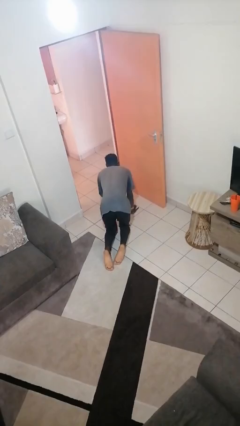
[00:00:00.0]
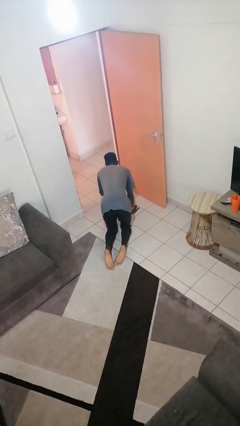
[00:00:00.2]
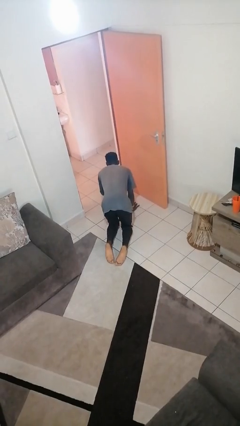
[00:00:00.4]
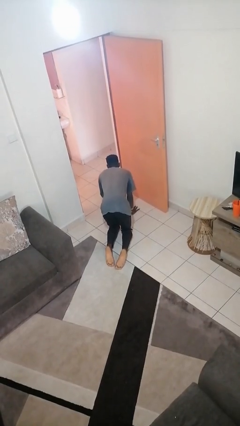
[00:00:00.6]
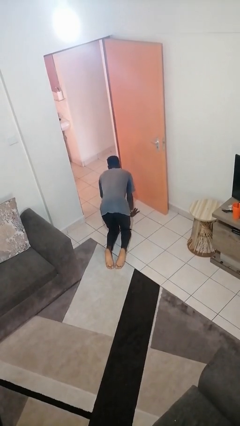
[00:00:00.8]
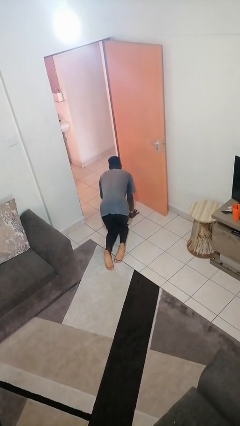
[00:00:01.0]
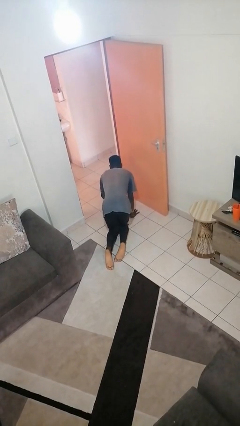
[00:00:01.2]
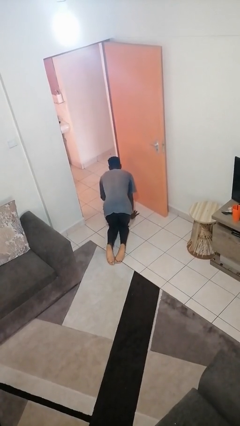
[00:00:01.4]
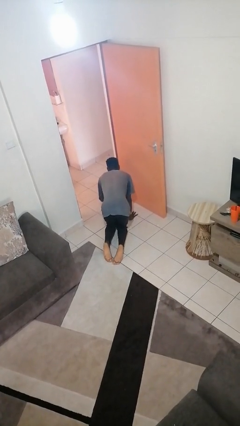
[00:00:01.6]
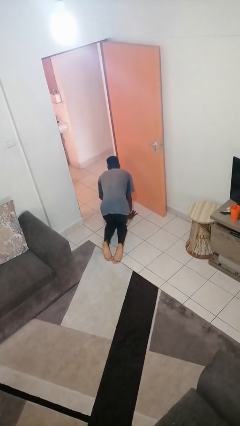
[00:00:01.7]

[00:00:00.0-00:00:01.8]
person crawls

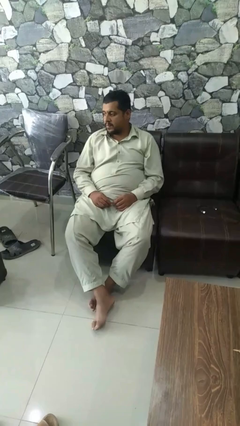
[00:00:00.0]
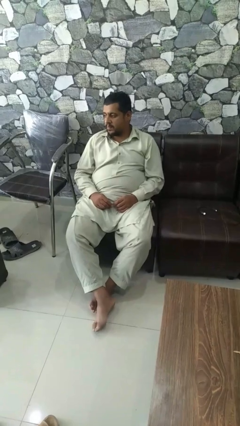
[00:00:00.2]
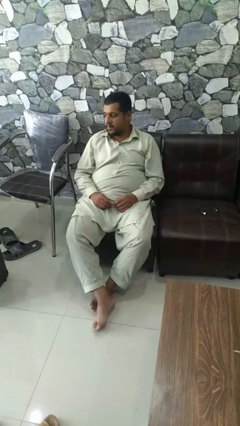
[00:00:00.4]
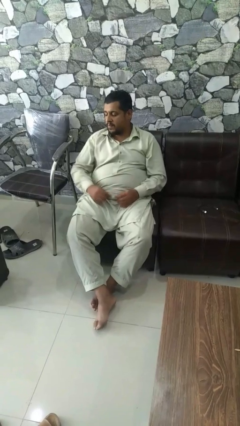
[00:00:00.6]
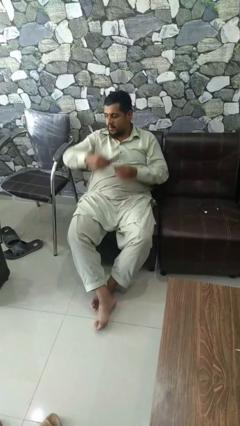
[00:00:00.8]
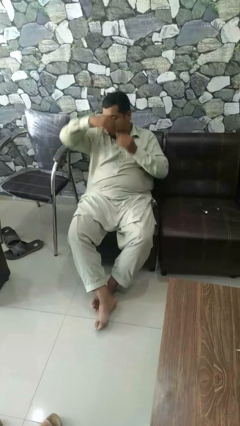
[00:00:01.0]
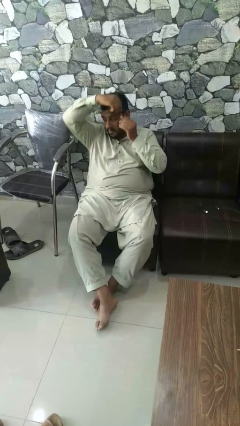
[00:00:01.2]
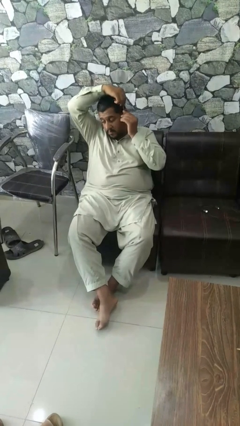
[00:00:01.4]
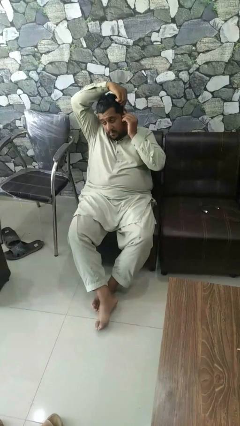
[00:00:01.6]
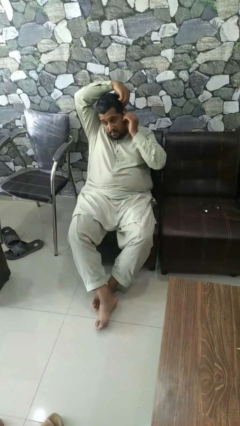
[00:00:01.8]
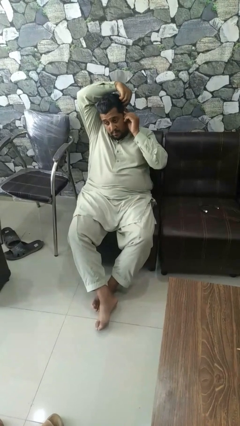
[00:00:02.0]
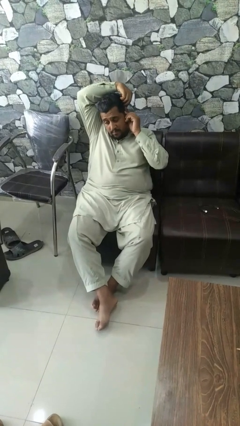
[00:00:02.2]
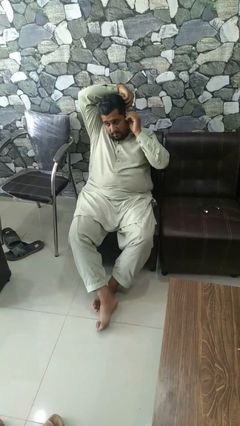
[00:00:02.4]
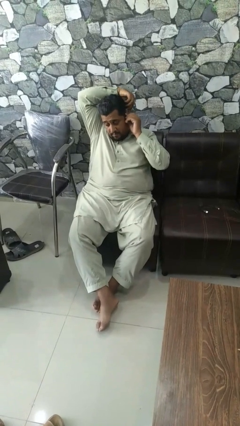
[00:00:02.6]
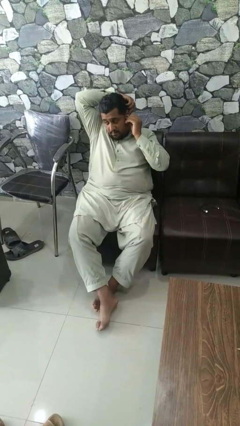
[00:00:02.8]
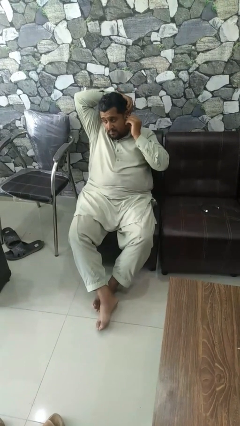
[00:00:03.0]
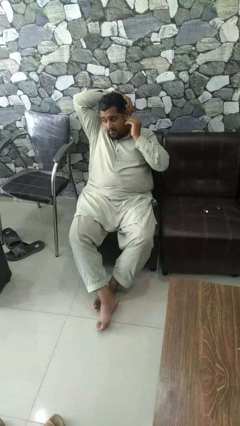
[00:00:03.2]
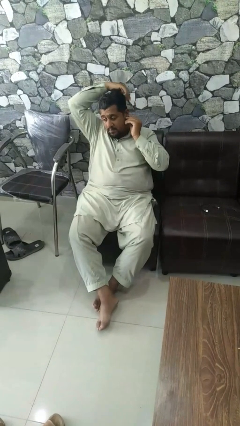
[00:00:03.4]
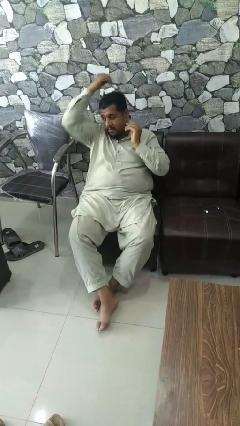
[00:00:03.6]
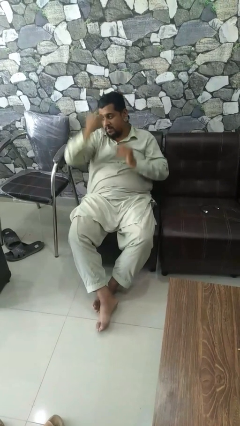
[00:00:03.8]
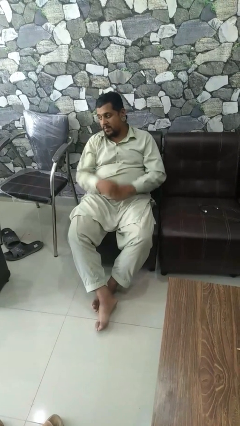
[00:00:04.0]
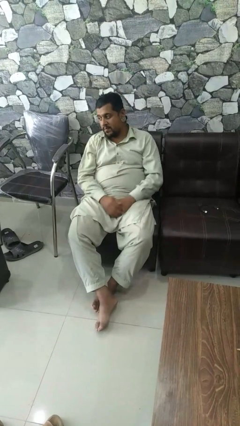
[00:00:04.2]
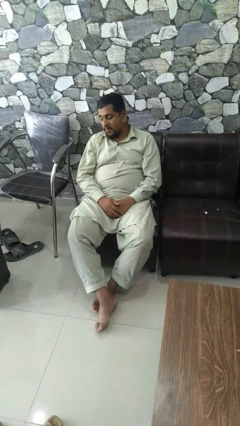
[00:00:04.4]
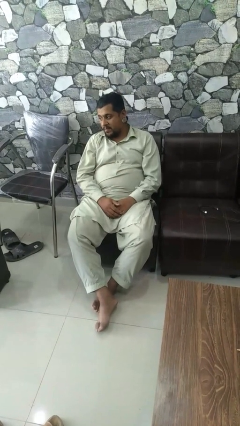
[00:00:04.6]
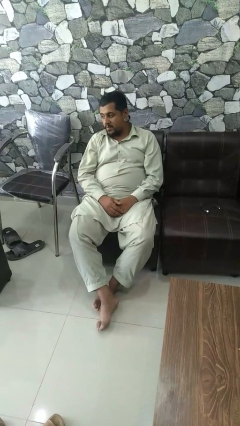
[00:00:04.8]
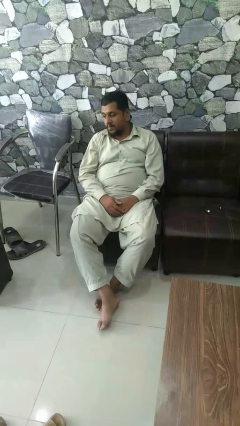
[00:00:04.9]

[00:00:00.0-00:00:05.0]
person puts on earrings

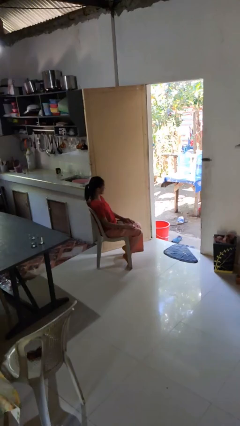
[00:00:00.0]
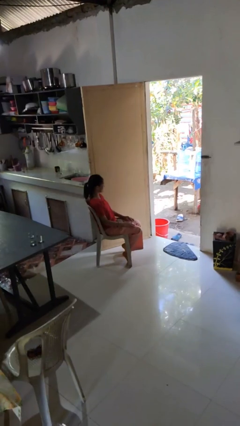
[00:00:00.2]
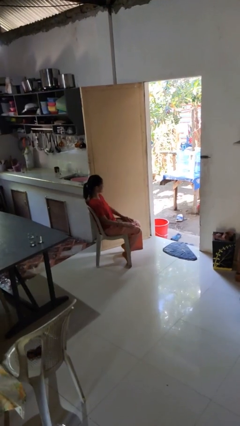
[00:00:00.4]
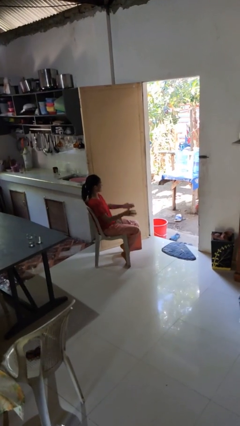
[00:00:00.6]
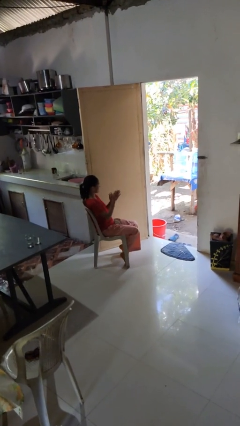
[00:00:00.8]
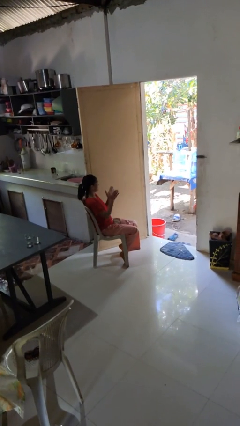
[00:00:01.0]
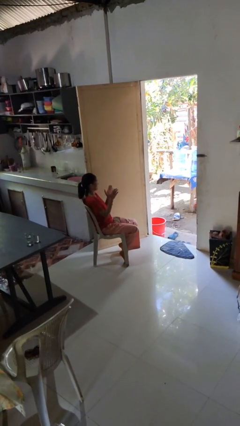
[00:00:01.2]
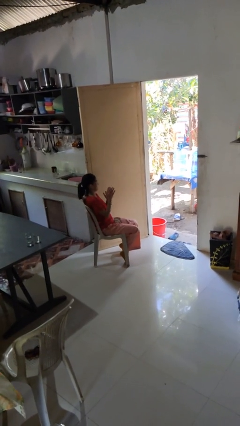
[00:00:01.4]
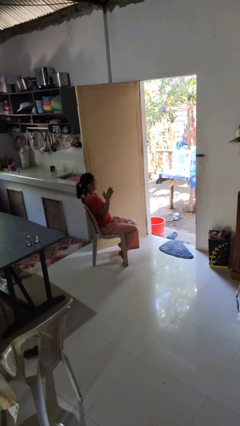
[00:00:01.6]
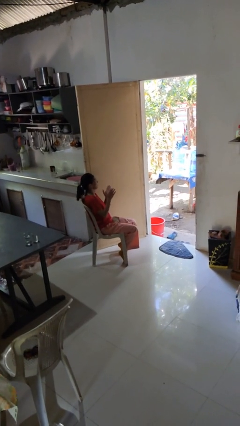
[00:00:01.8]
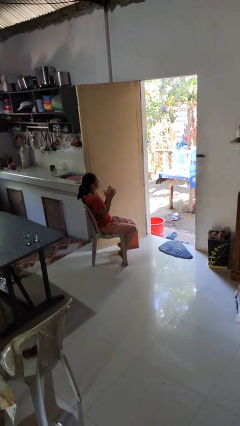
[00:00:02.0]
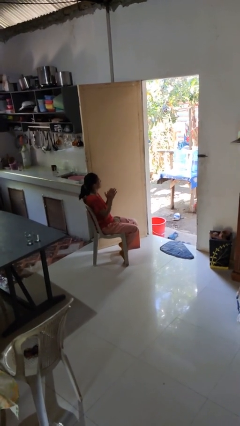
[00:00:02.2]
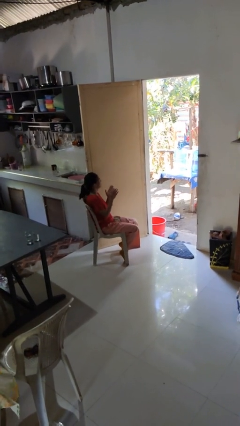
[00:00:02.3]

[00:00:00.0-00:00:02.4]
person claps hands

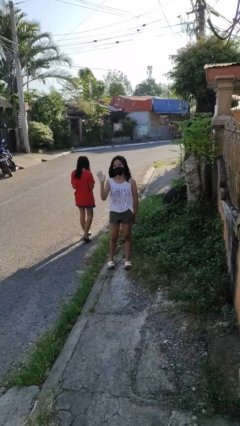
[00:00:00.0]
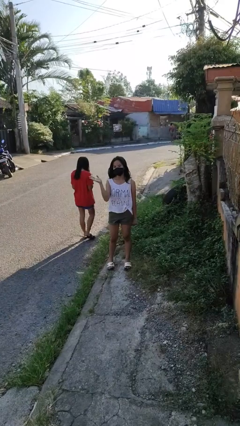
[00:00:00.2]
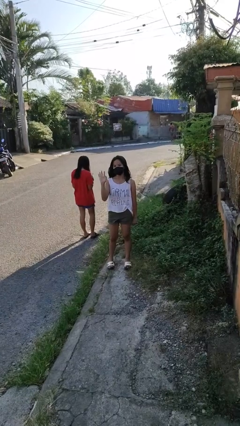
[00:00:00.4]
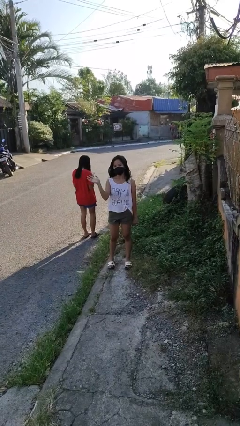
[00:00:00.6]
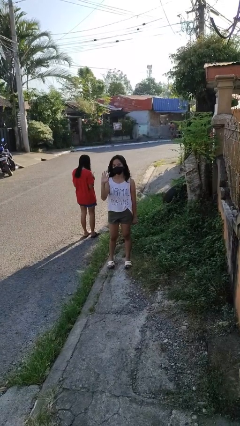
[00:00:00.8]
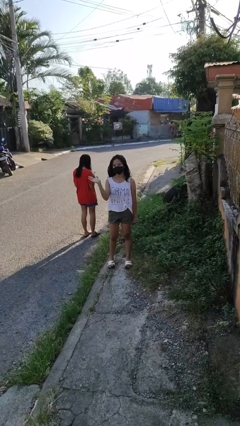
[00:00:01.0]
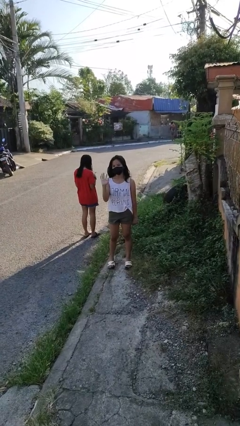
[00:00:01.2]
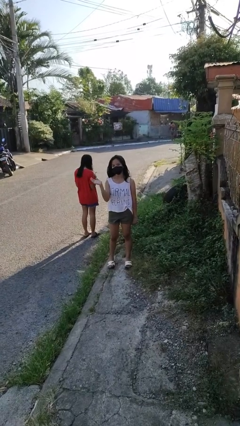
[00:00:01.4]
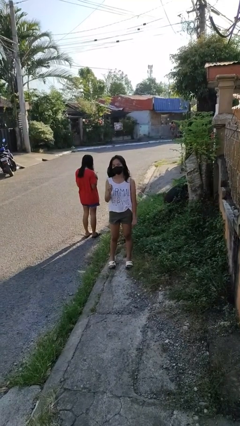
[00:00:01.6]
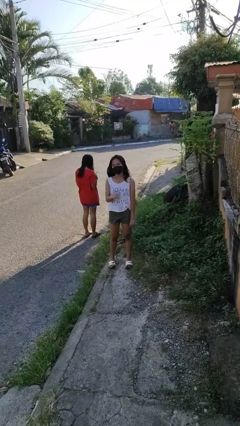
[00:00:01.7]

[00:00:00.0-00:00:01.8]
person waves at person

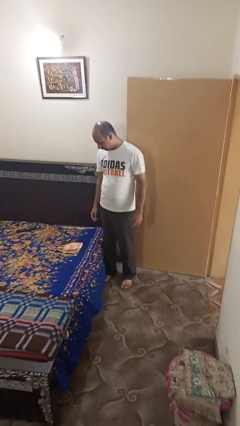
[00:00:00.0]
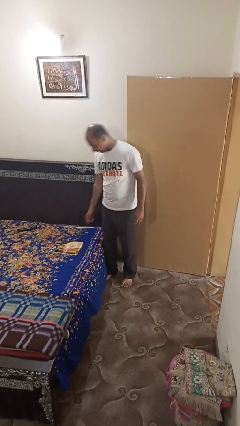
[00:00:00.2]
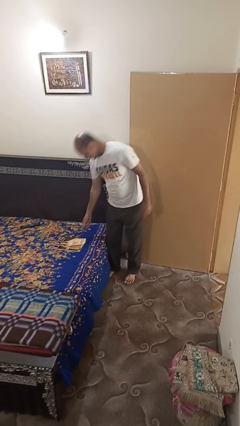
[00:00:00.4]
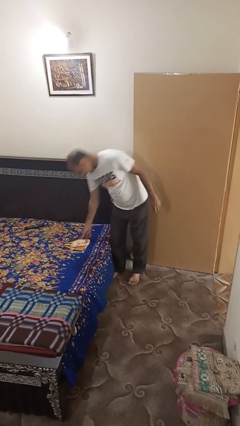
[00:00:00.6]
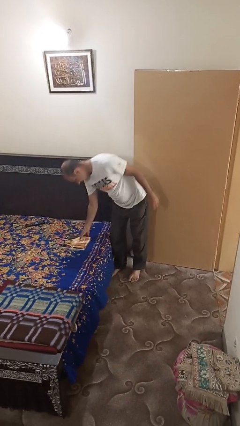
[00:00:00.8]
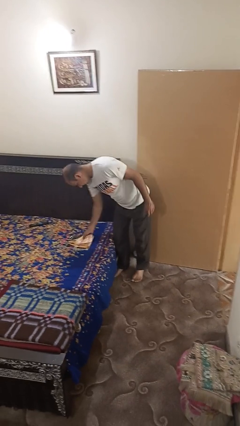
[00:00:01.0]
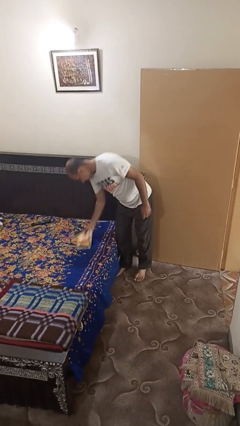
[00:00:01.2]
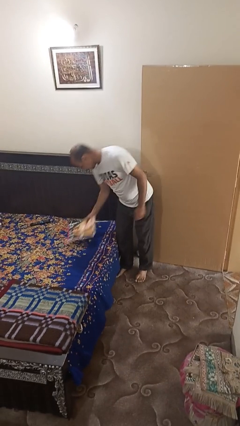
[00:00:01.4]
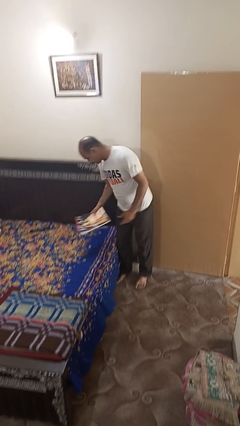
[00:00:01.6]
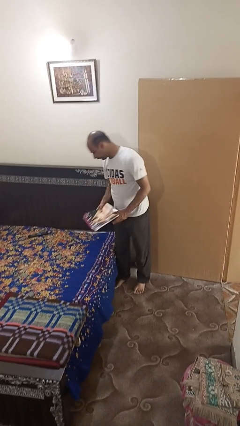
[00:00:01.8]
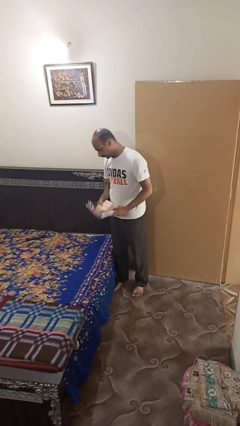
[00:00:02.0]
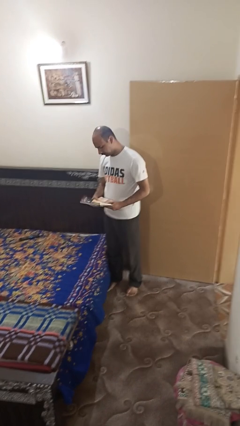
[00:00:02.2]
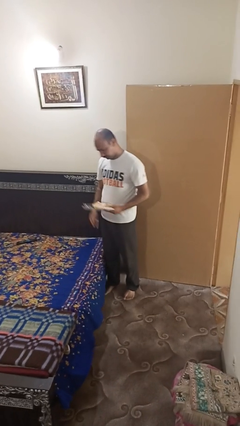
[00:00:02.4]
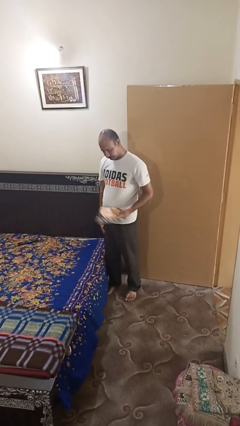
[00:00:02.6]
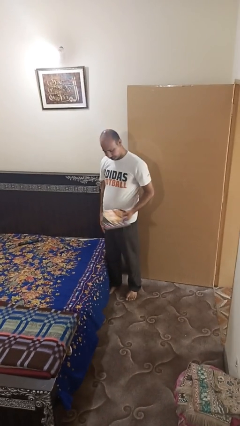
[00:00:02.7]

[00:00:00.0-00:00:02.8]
person picks up object from bed

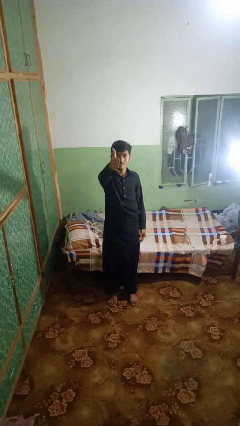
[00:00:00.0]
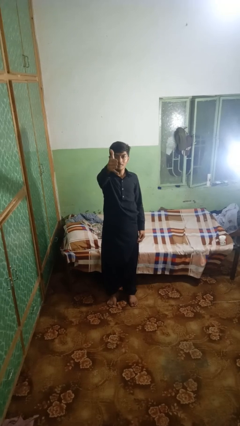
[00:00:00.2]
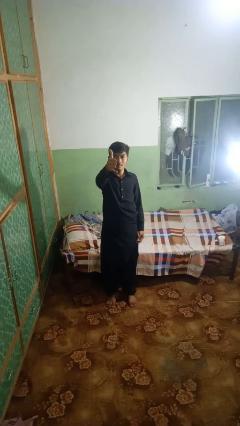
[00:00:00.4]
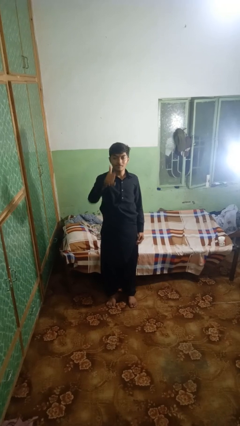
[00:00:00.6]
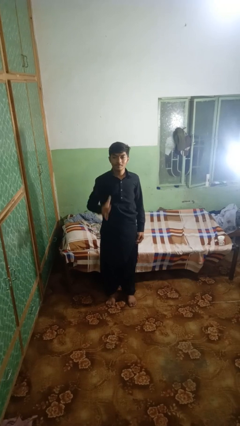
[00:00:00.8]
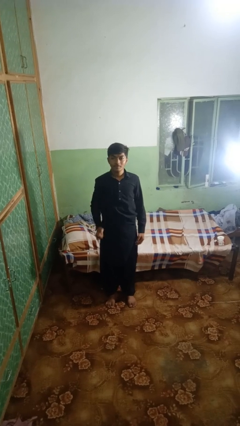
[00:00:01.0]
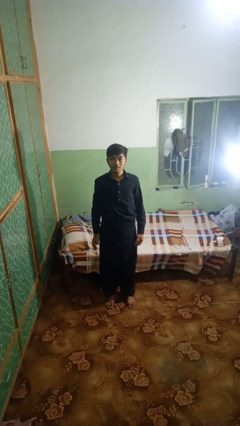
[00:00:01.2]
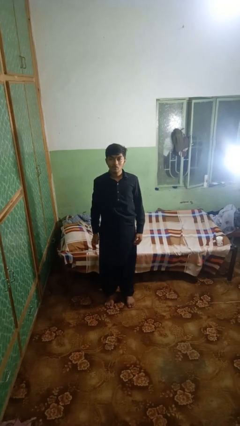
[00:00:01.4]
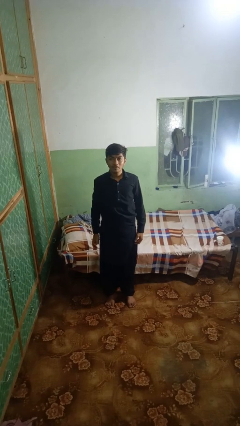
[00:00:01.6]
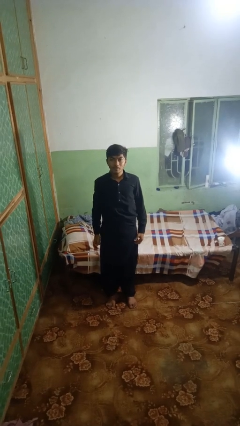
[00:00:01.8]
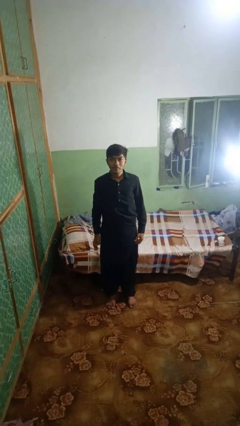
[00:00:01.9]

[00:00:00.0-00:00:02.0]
person gestures hang loose

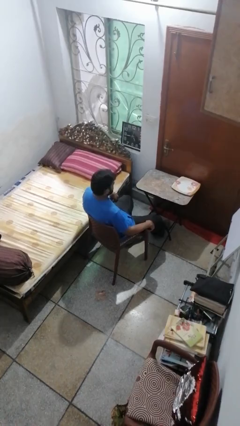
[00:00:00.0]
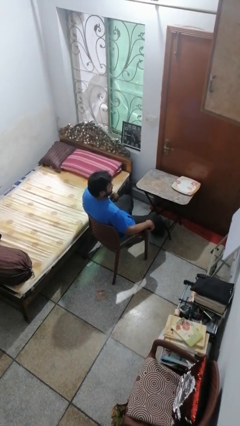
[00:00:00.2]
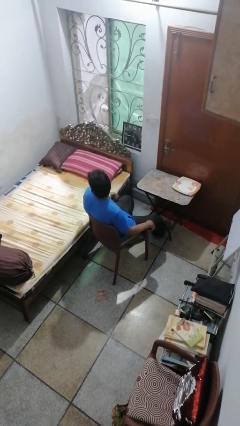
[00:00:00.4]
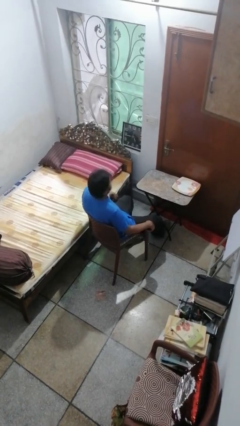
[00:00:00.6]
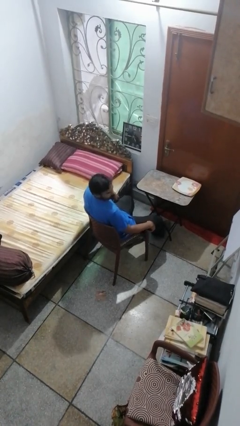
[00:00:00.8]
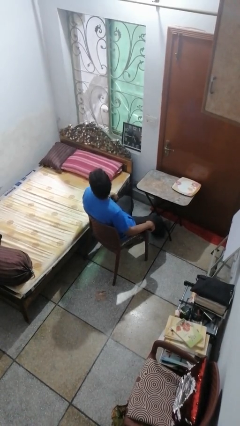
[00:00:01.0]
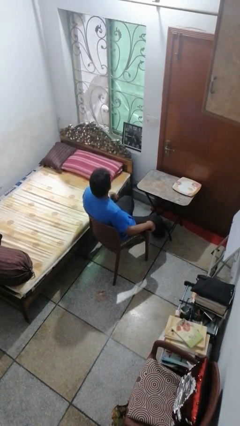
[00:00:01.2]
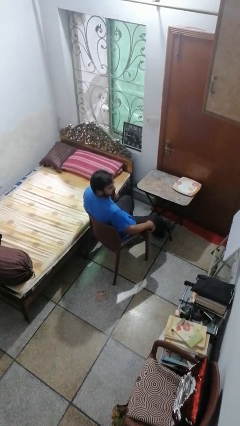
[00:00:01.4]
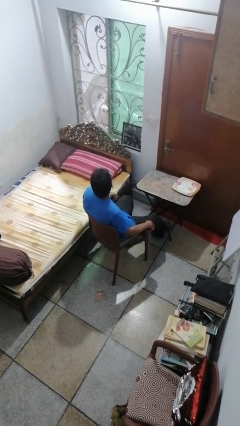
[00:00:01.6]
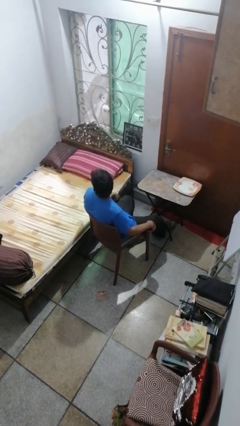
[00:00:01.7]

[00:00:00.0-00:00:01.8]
person shakes head
